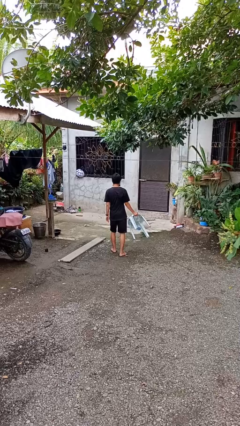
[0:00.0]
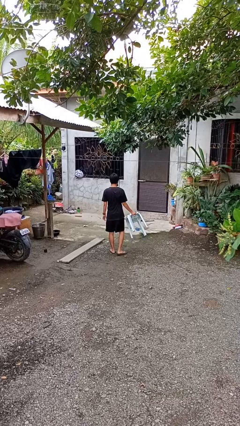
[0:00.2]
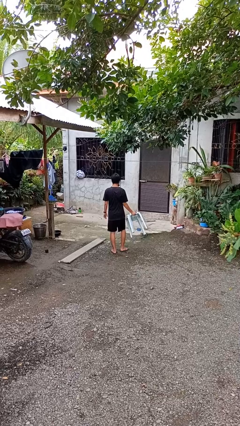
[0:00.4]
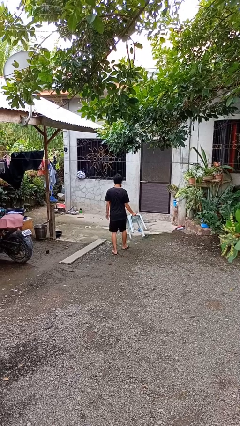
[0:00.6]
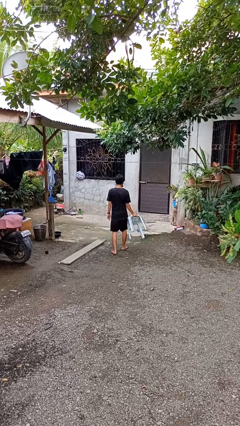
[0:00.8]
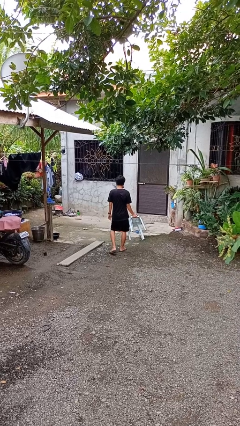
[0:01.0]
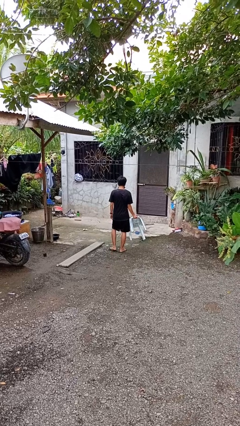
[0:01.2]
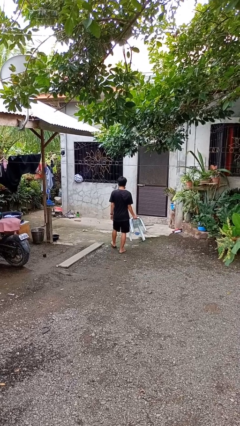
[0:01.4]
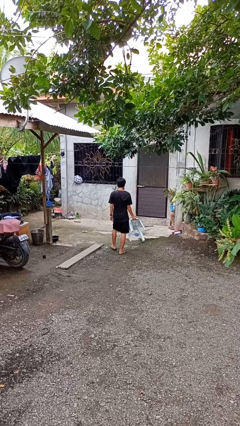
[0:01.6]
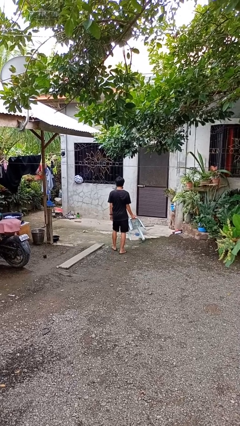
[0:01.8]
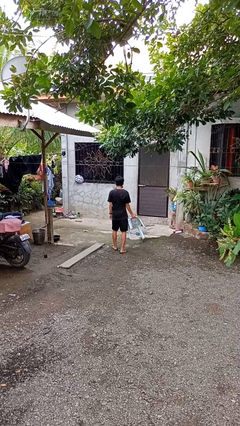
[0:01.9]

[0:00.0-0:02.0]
person carries furniture

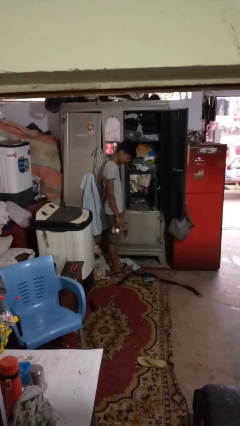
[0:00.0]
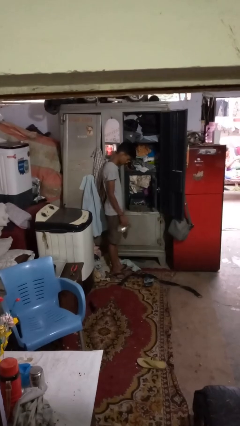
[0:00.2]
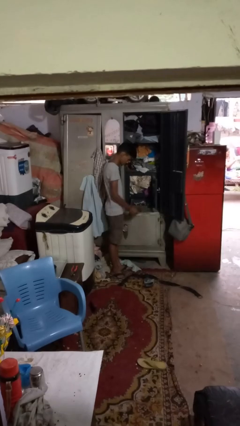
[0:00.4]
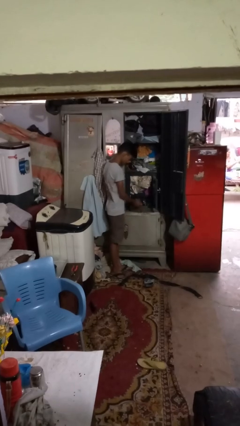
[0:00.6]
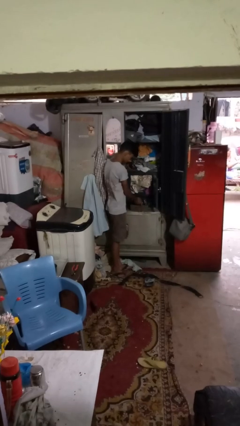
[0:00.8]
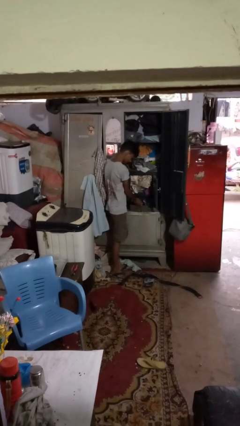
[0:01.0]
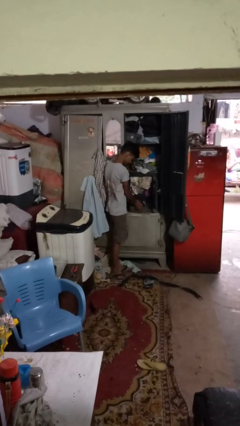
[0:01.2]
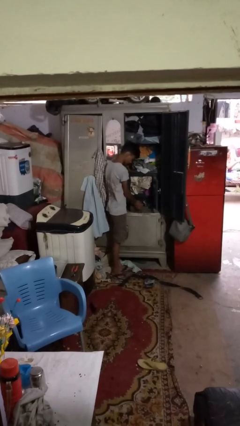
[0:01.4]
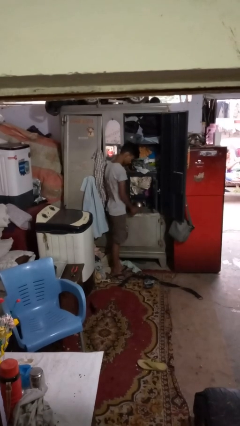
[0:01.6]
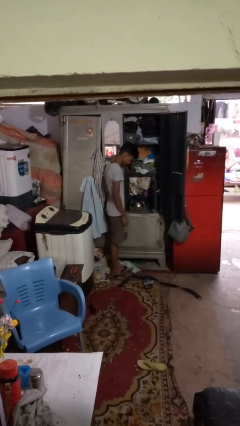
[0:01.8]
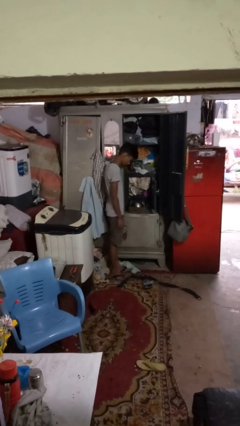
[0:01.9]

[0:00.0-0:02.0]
person puts clothes into dresser

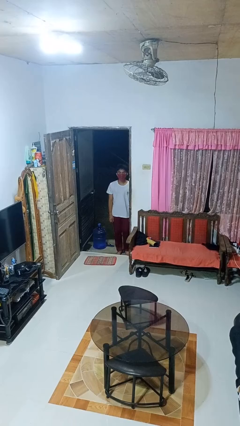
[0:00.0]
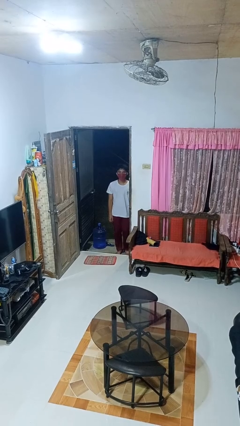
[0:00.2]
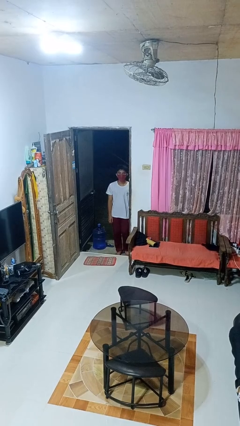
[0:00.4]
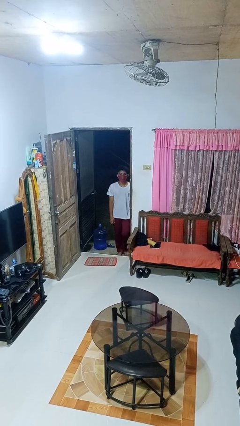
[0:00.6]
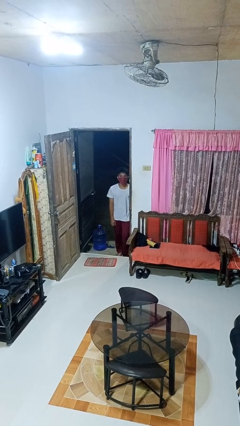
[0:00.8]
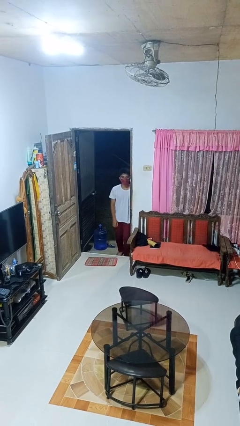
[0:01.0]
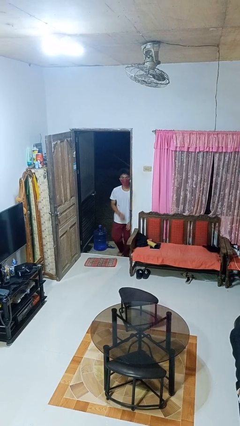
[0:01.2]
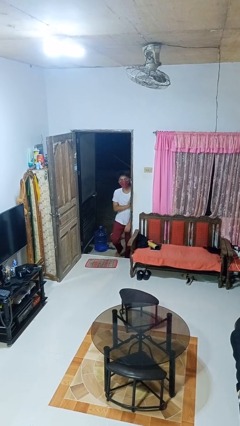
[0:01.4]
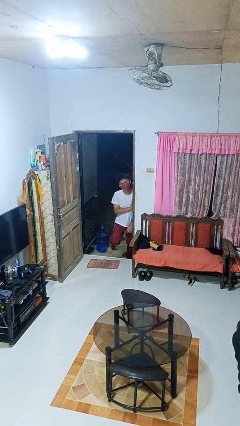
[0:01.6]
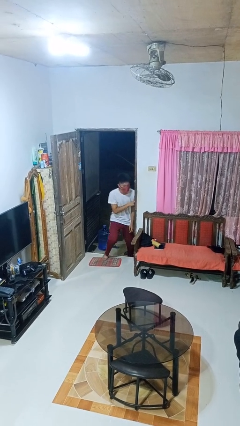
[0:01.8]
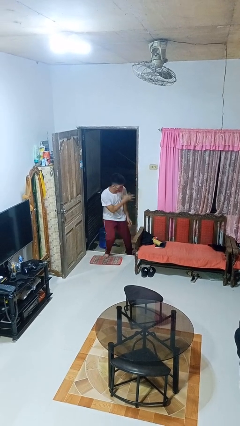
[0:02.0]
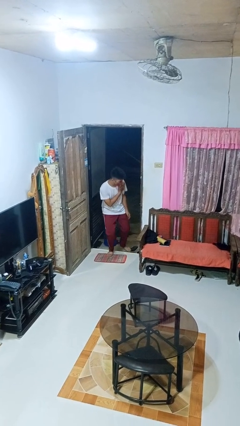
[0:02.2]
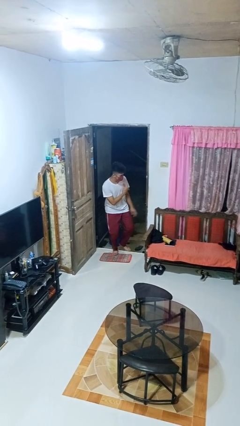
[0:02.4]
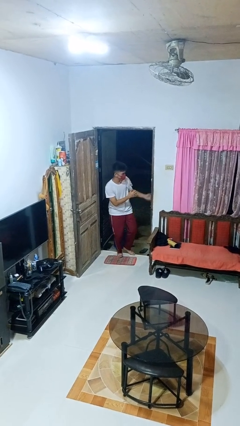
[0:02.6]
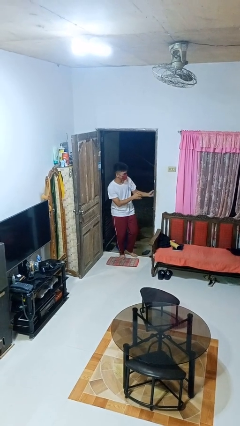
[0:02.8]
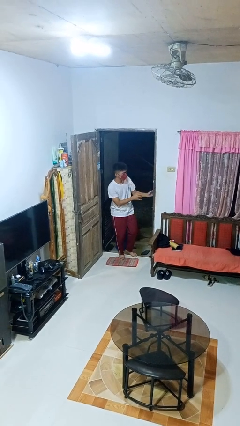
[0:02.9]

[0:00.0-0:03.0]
person bumps into wall

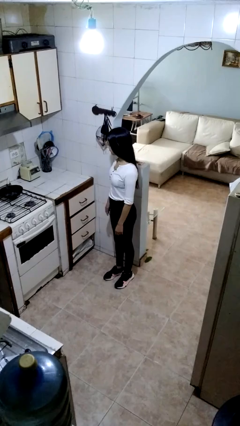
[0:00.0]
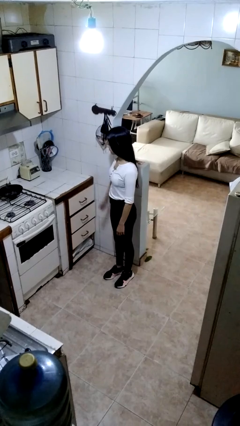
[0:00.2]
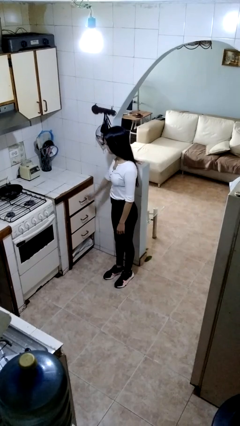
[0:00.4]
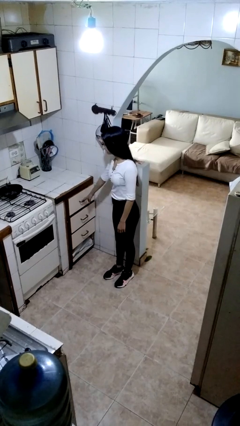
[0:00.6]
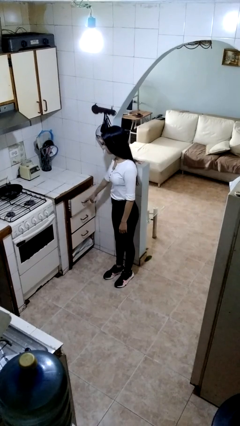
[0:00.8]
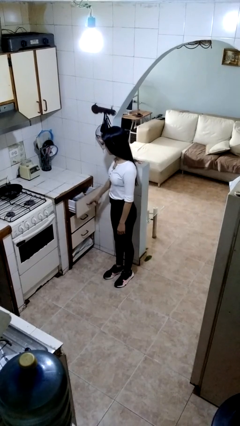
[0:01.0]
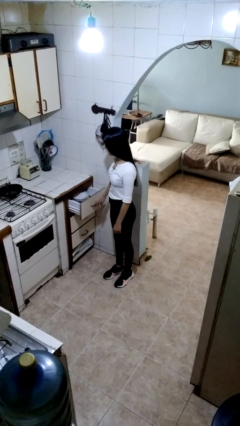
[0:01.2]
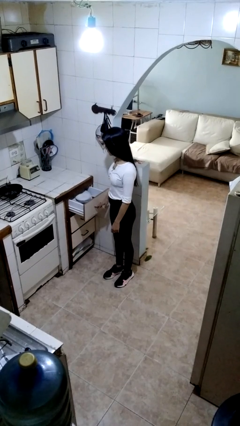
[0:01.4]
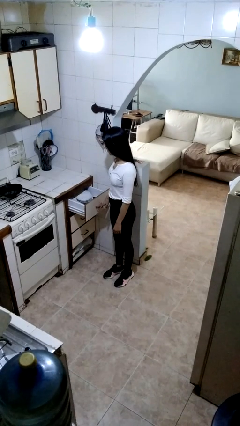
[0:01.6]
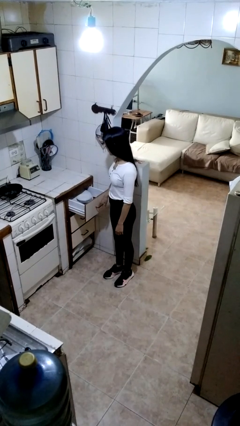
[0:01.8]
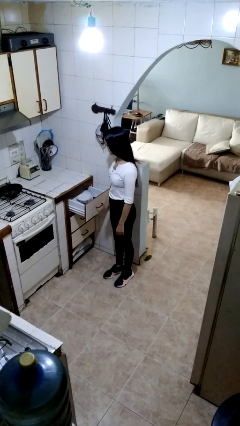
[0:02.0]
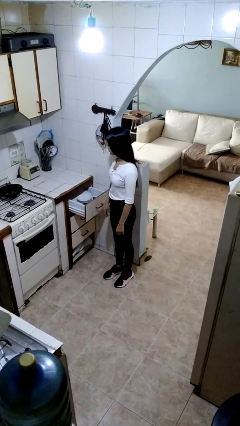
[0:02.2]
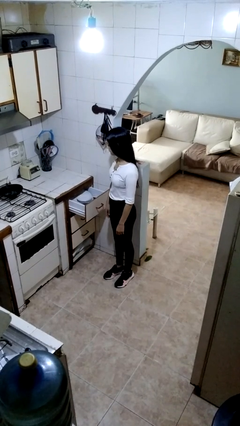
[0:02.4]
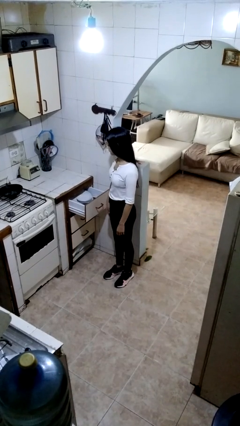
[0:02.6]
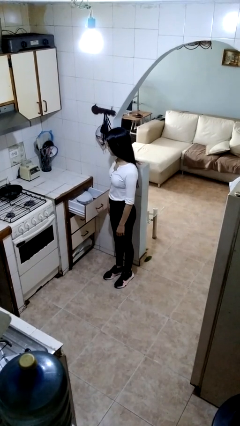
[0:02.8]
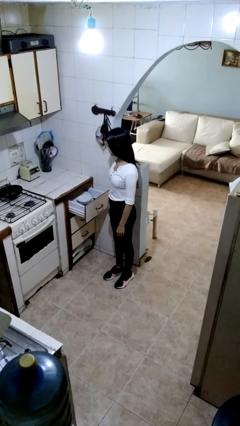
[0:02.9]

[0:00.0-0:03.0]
person opens kitchen drawer

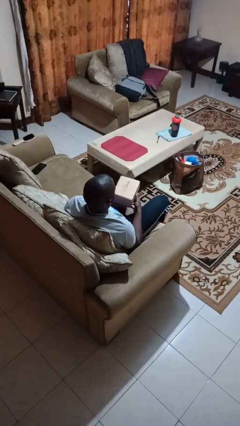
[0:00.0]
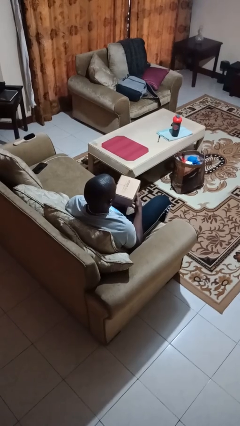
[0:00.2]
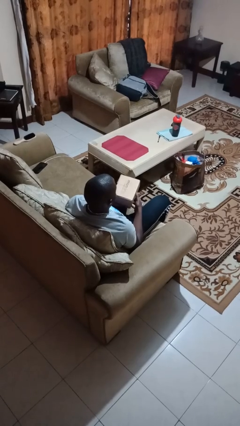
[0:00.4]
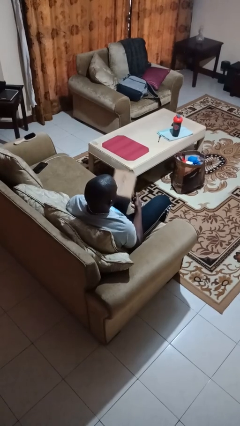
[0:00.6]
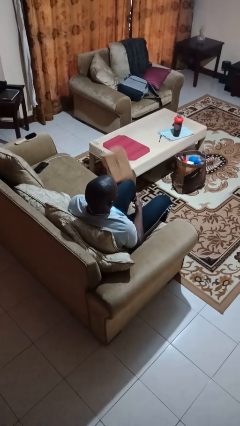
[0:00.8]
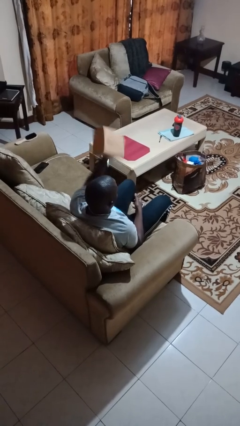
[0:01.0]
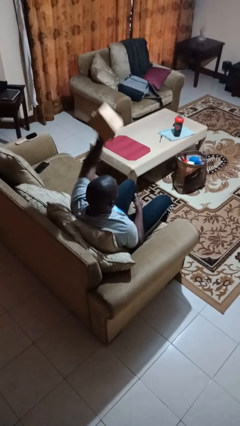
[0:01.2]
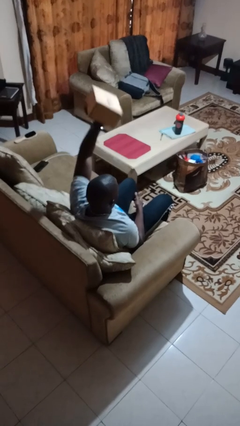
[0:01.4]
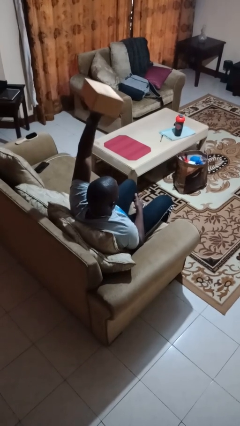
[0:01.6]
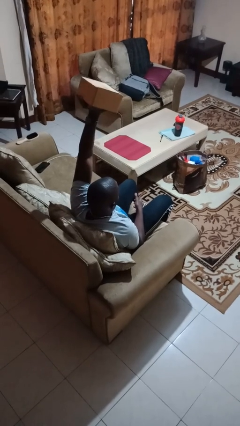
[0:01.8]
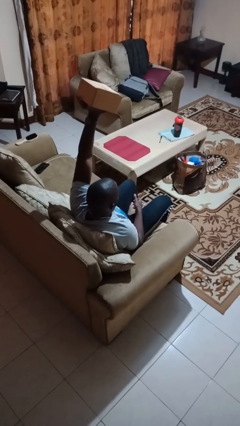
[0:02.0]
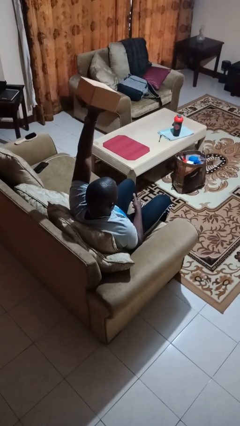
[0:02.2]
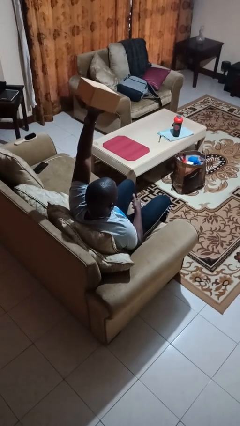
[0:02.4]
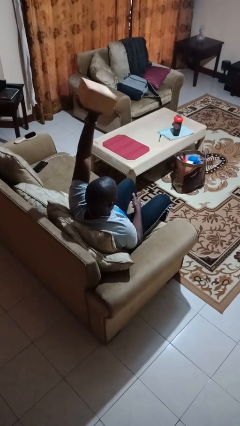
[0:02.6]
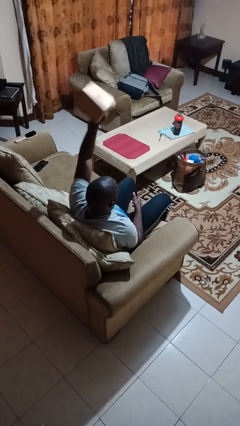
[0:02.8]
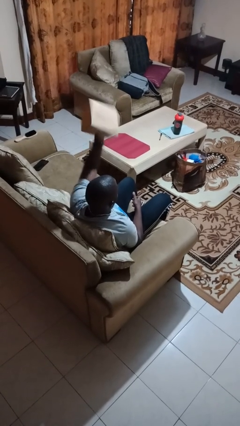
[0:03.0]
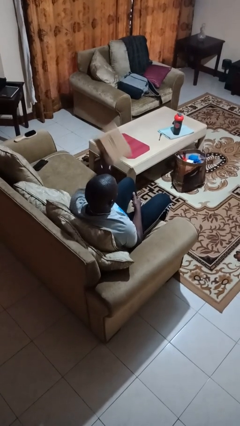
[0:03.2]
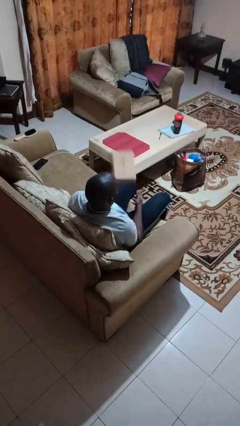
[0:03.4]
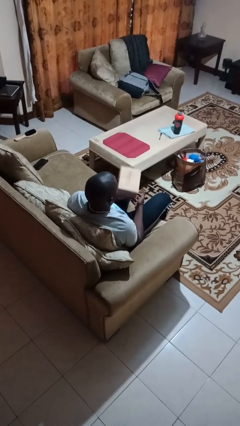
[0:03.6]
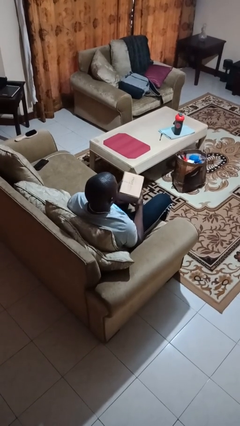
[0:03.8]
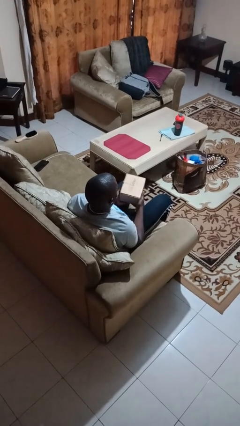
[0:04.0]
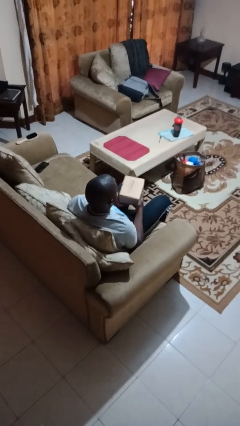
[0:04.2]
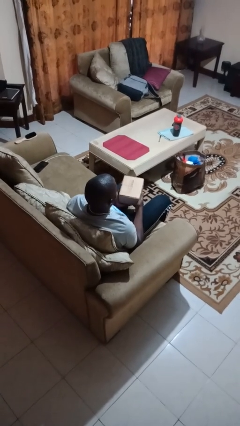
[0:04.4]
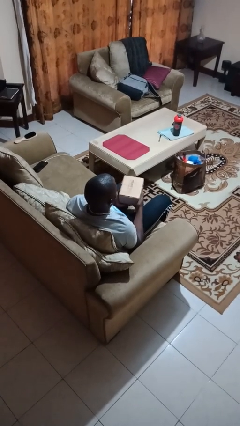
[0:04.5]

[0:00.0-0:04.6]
person holds object above head

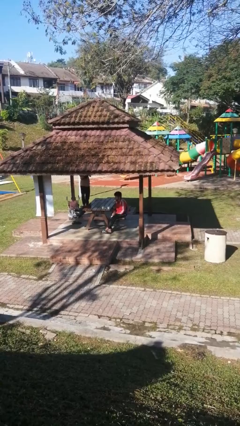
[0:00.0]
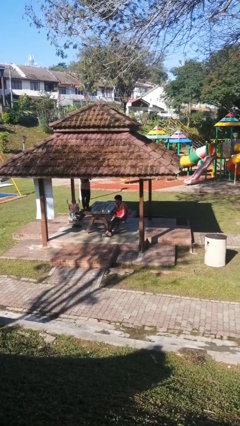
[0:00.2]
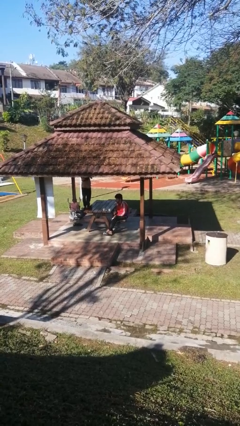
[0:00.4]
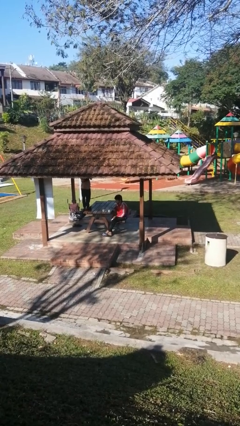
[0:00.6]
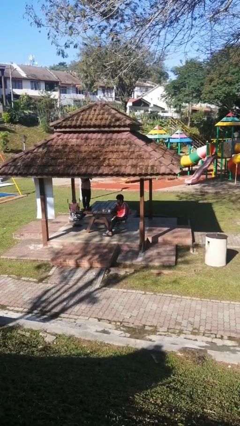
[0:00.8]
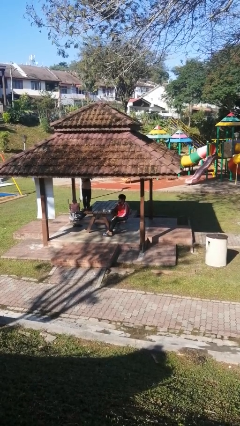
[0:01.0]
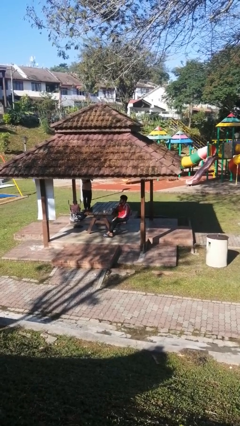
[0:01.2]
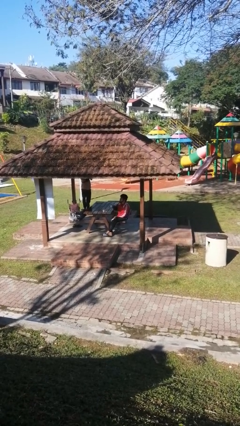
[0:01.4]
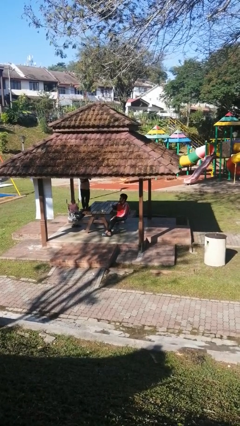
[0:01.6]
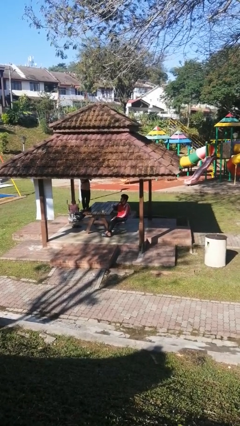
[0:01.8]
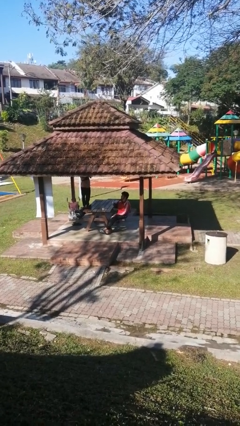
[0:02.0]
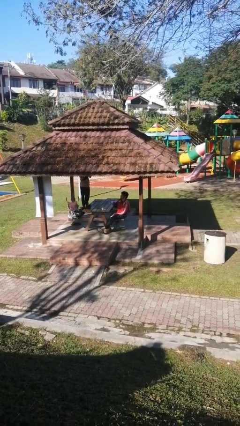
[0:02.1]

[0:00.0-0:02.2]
person picks up object from table

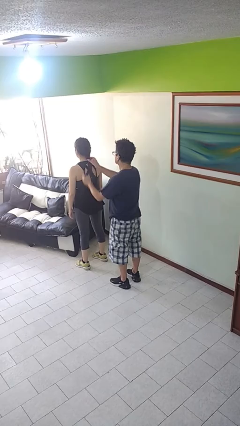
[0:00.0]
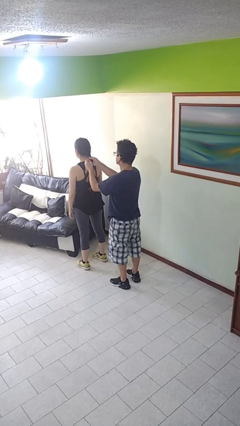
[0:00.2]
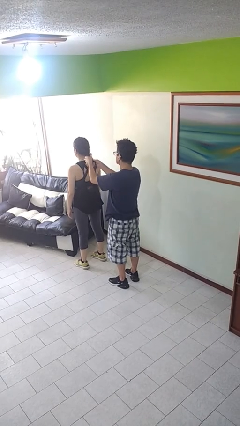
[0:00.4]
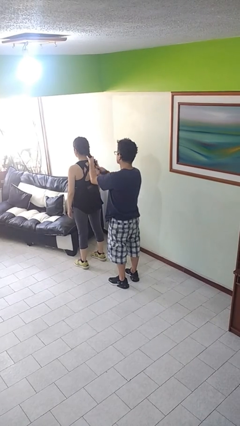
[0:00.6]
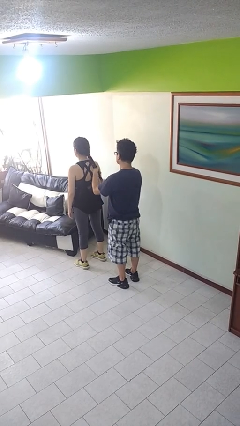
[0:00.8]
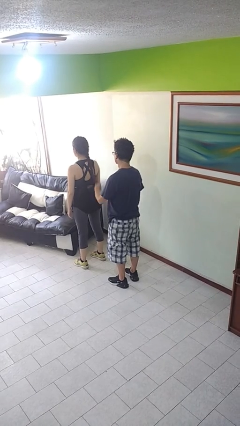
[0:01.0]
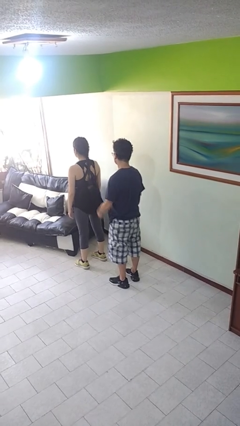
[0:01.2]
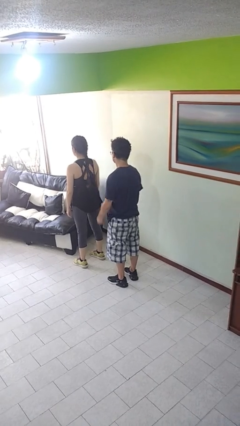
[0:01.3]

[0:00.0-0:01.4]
person grabs person by hair
